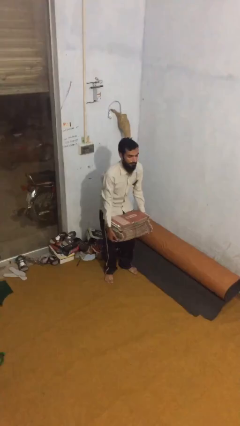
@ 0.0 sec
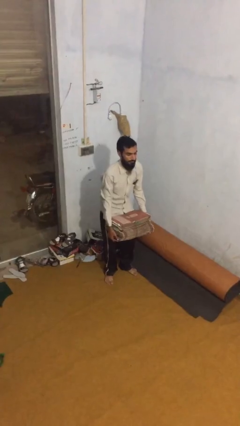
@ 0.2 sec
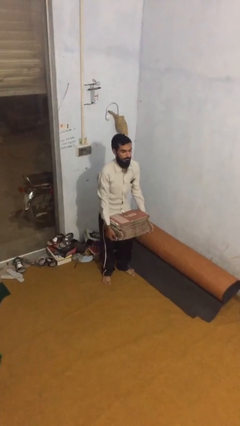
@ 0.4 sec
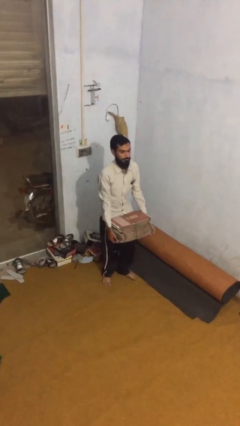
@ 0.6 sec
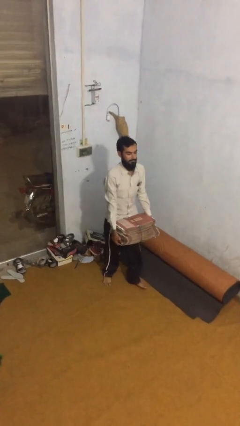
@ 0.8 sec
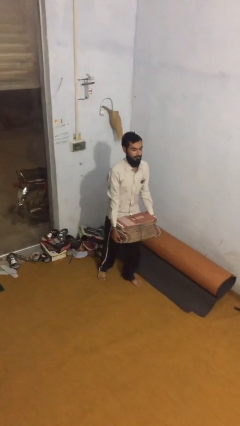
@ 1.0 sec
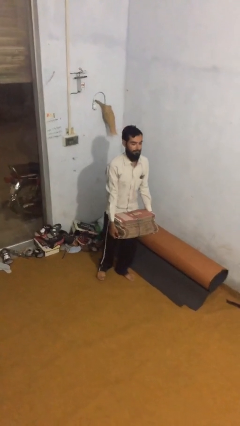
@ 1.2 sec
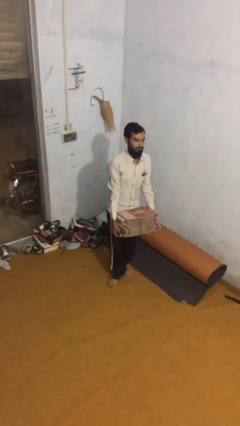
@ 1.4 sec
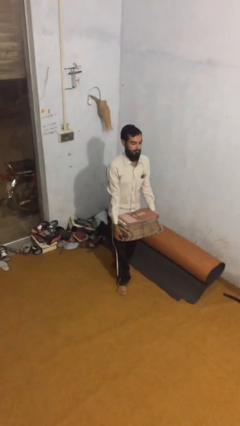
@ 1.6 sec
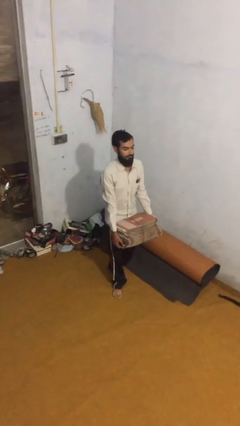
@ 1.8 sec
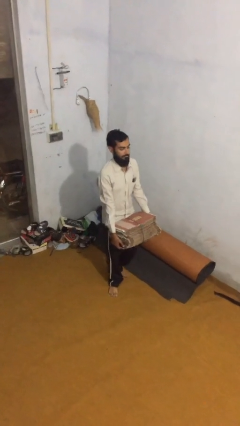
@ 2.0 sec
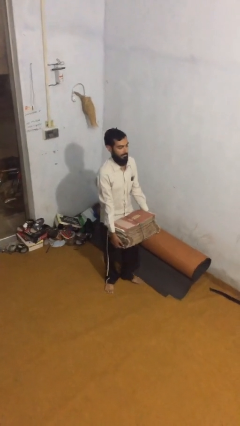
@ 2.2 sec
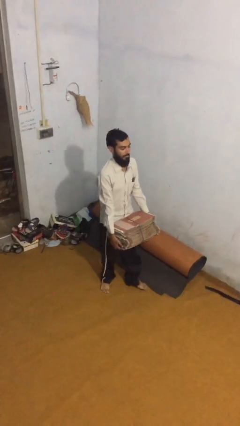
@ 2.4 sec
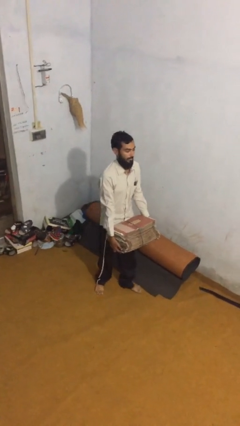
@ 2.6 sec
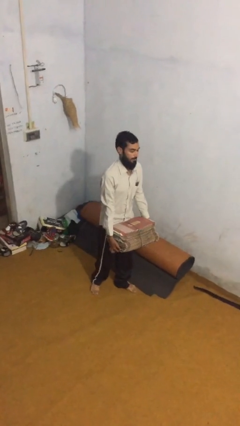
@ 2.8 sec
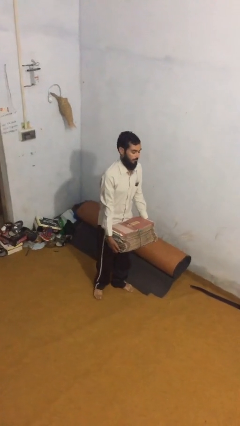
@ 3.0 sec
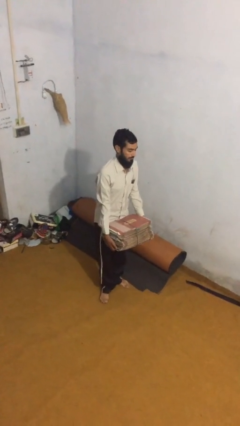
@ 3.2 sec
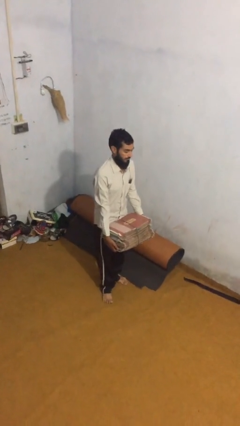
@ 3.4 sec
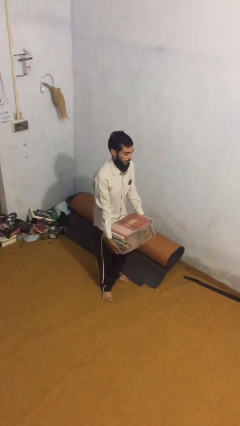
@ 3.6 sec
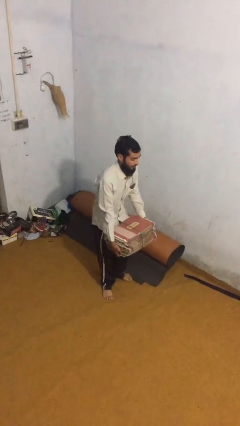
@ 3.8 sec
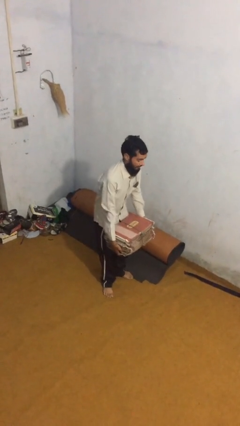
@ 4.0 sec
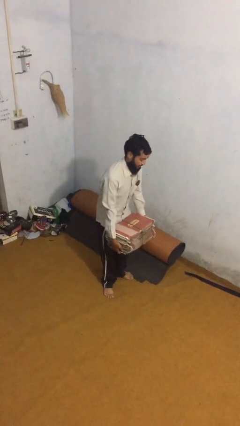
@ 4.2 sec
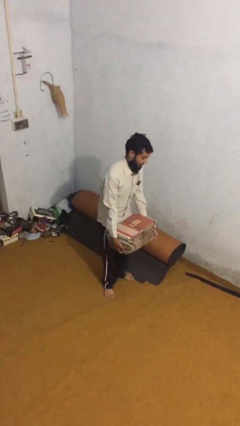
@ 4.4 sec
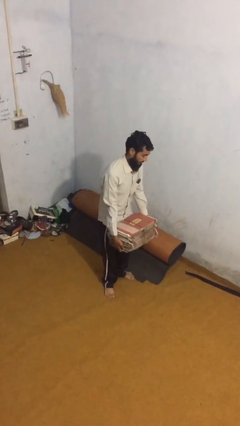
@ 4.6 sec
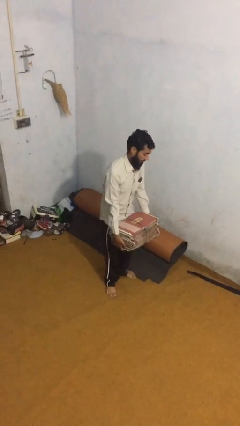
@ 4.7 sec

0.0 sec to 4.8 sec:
person carries heavy object

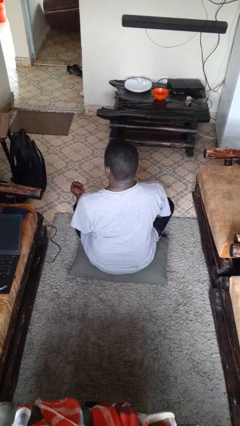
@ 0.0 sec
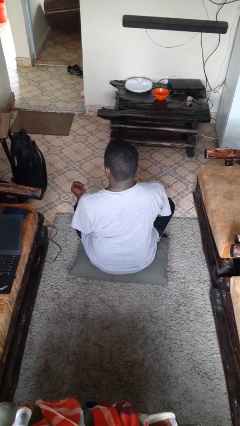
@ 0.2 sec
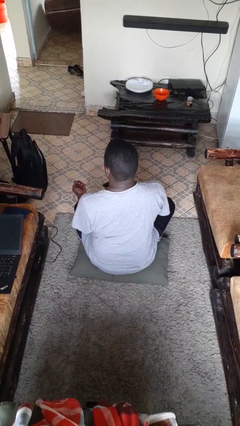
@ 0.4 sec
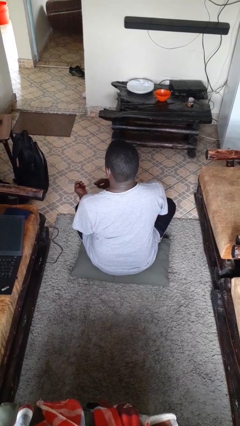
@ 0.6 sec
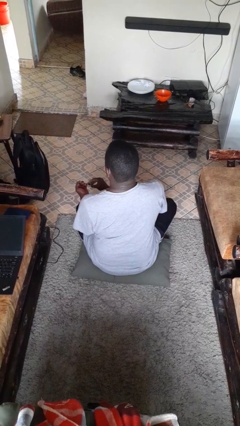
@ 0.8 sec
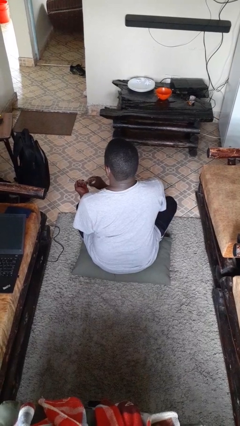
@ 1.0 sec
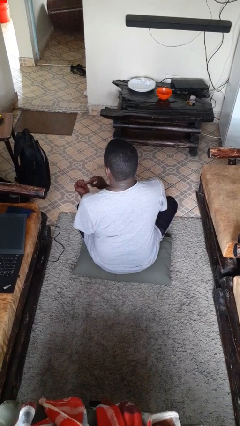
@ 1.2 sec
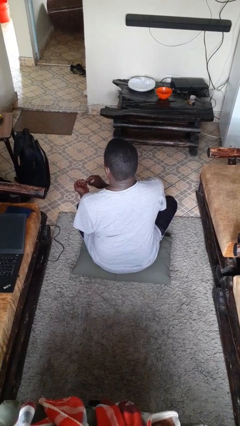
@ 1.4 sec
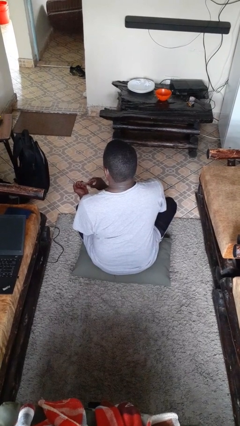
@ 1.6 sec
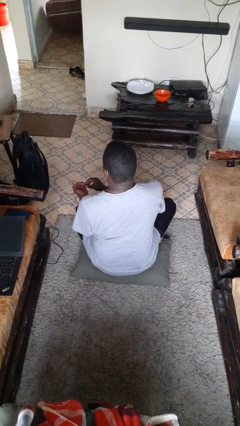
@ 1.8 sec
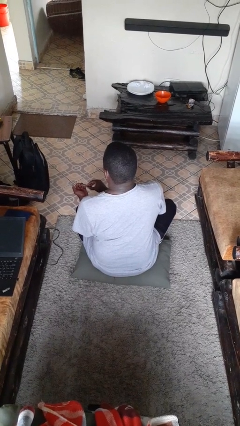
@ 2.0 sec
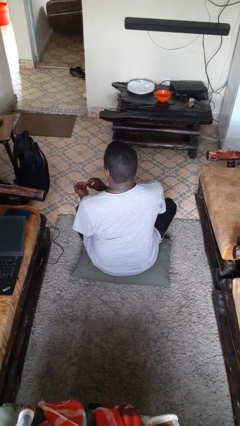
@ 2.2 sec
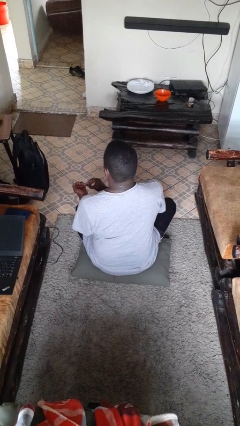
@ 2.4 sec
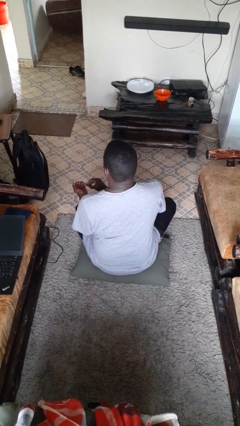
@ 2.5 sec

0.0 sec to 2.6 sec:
person files fingernails

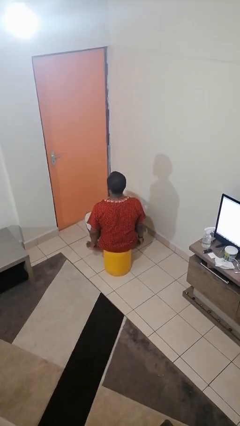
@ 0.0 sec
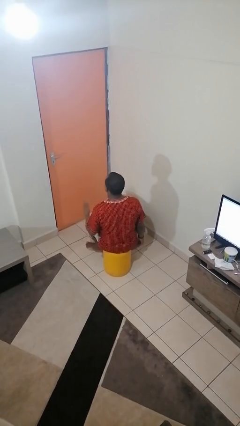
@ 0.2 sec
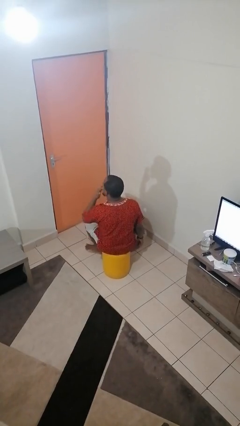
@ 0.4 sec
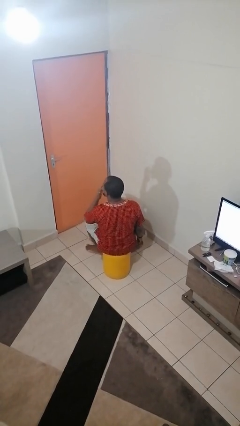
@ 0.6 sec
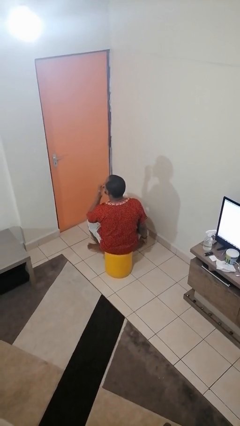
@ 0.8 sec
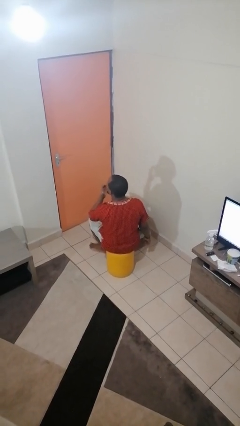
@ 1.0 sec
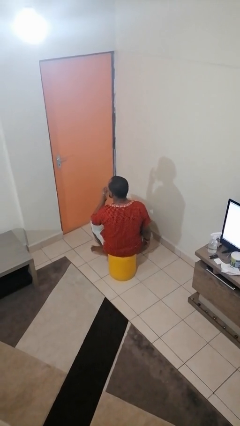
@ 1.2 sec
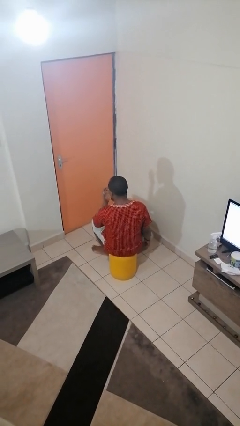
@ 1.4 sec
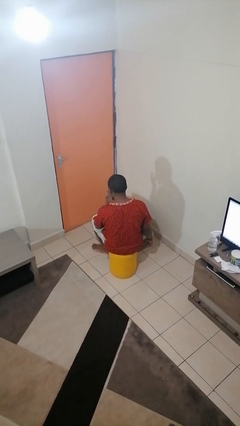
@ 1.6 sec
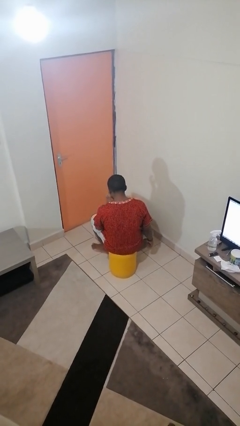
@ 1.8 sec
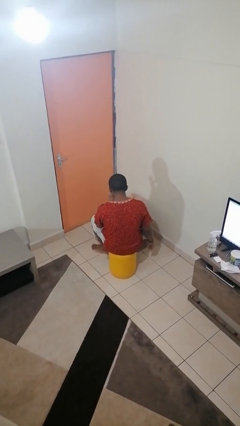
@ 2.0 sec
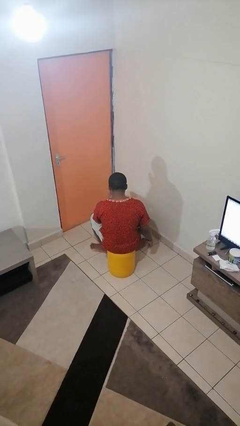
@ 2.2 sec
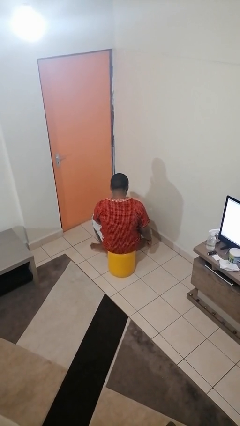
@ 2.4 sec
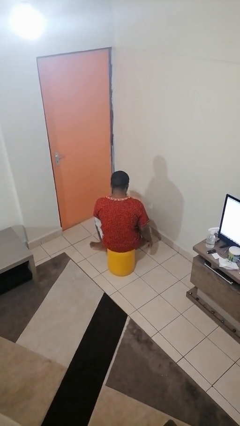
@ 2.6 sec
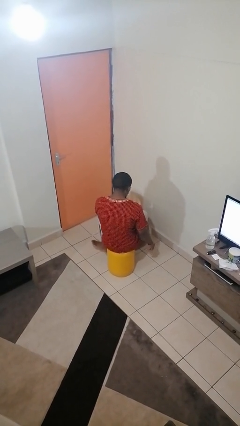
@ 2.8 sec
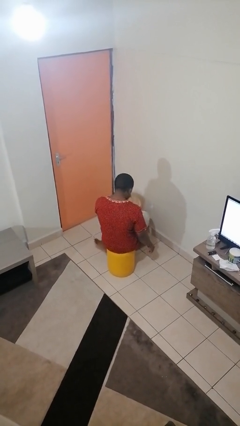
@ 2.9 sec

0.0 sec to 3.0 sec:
person licks fingers

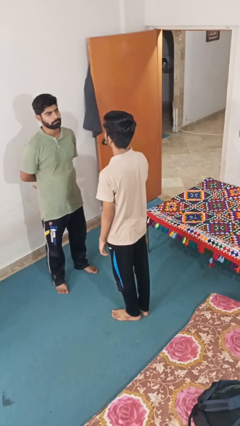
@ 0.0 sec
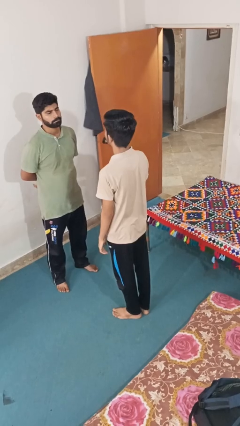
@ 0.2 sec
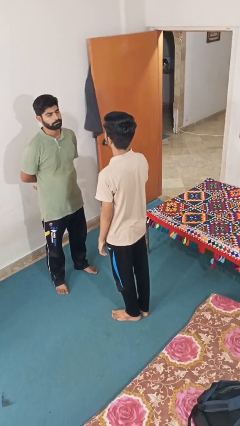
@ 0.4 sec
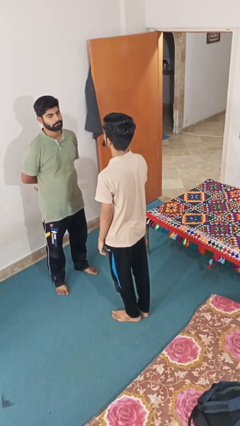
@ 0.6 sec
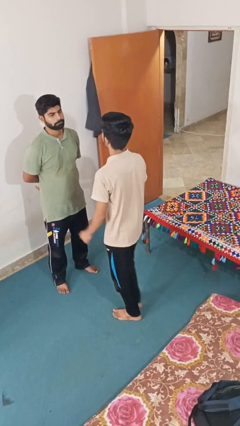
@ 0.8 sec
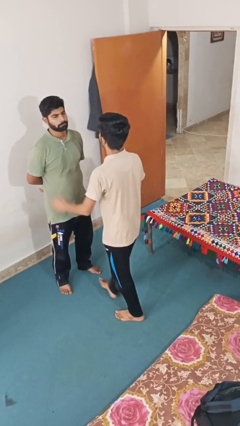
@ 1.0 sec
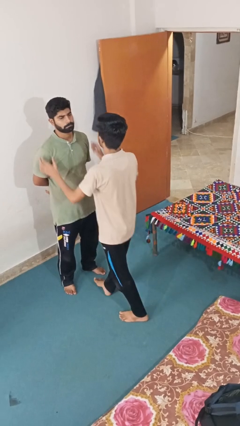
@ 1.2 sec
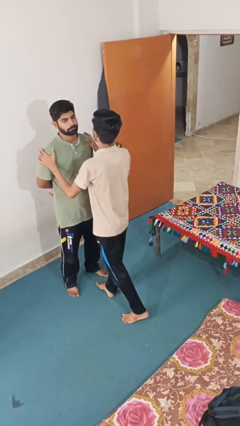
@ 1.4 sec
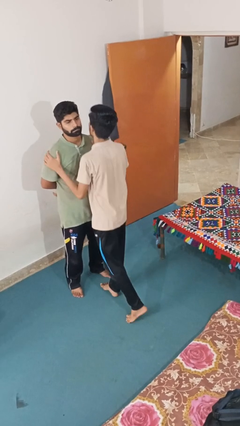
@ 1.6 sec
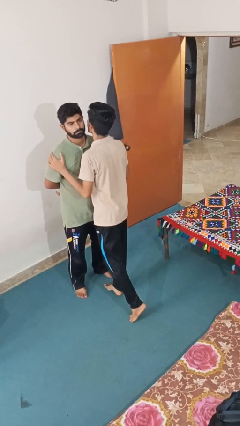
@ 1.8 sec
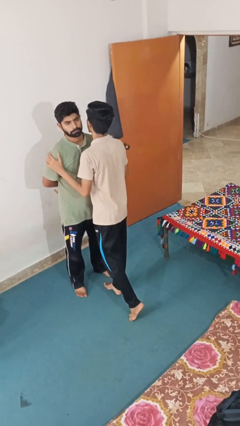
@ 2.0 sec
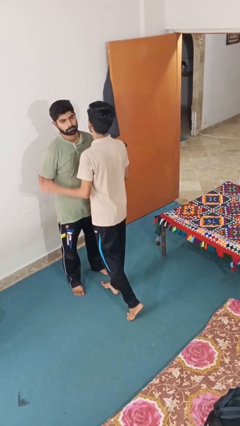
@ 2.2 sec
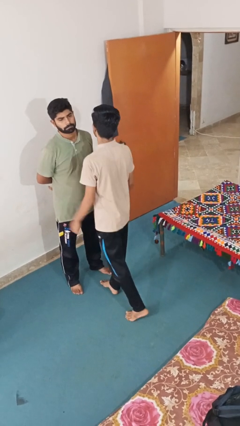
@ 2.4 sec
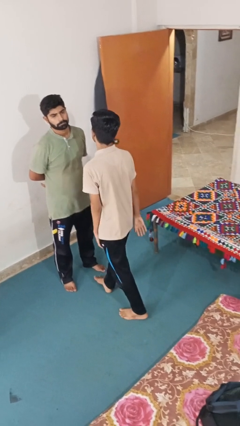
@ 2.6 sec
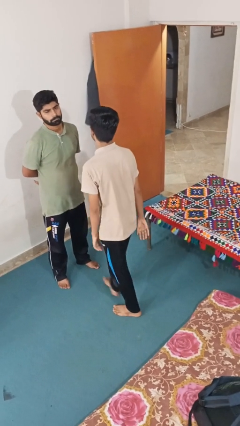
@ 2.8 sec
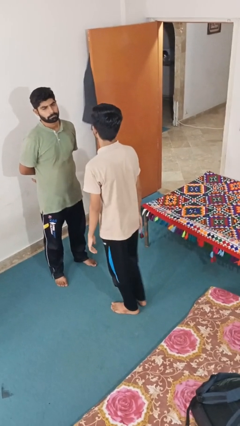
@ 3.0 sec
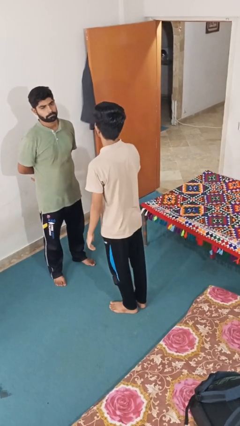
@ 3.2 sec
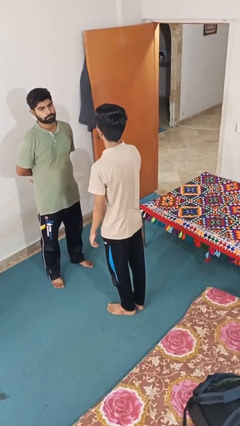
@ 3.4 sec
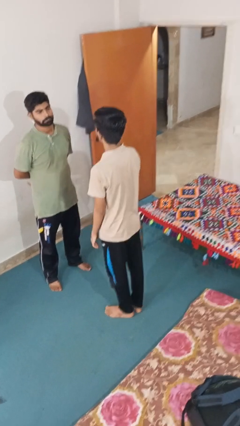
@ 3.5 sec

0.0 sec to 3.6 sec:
person kisses cheek of person

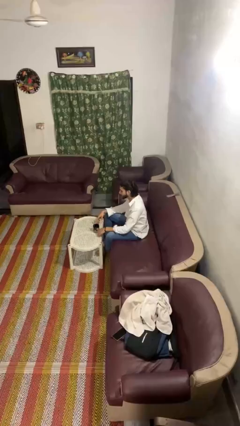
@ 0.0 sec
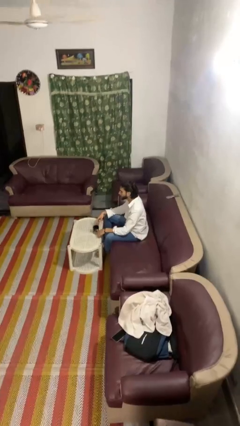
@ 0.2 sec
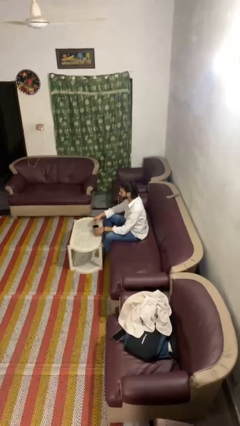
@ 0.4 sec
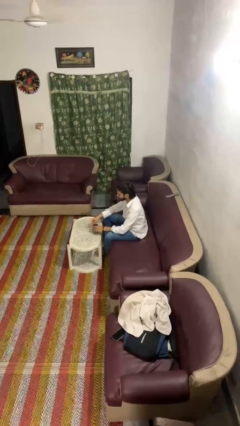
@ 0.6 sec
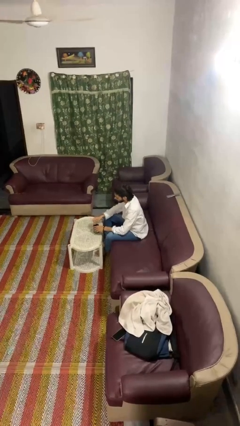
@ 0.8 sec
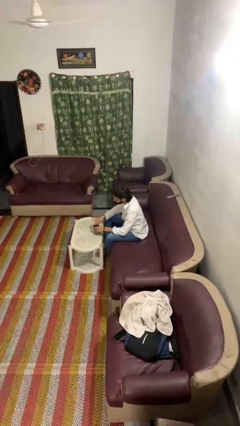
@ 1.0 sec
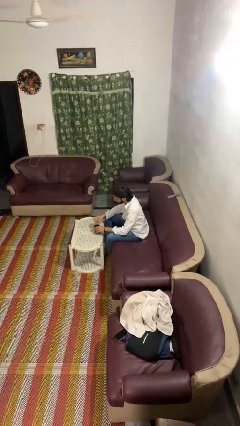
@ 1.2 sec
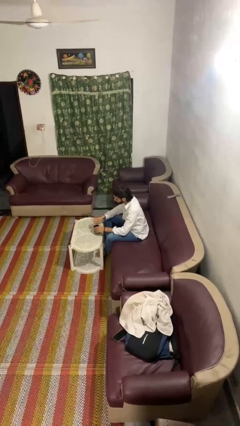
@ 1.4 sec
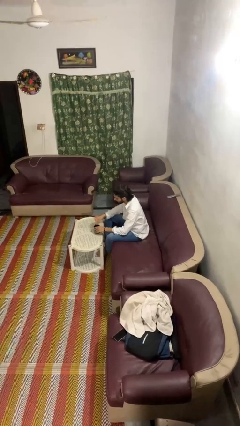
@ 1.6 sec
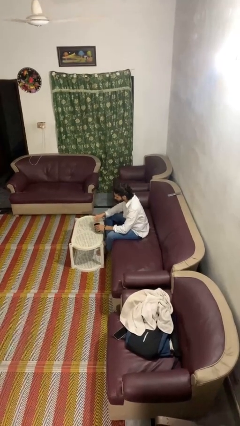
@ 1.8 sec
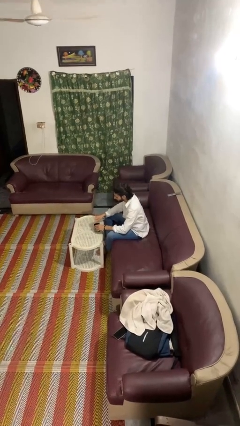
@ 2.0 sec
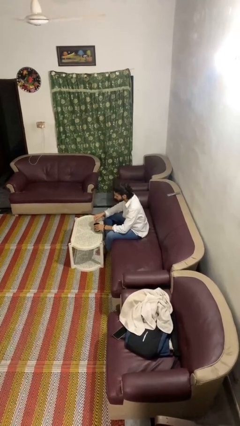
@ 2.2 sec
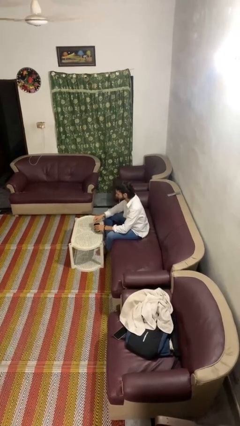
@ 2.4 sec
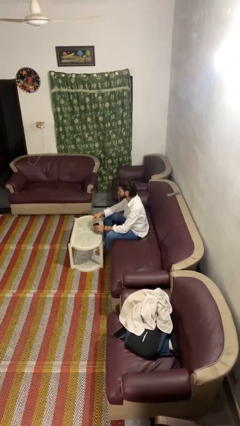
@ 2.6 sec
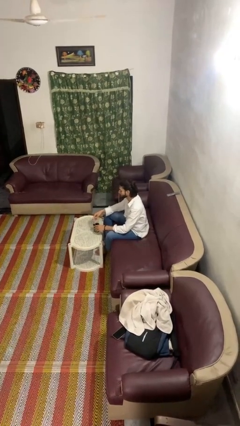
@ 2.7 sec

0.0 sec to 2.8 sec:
person stirs mug

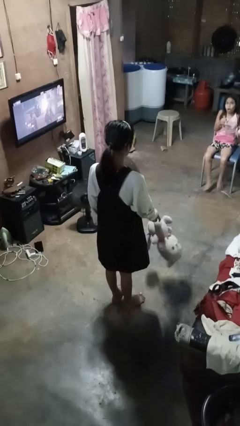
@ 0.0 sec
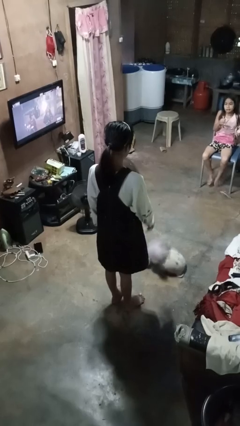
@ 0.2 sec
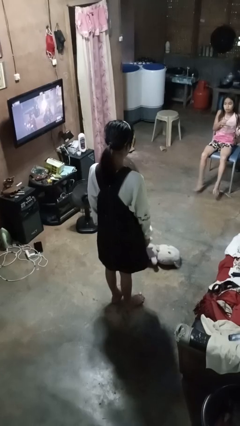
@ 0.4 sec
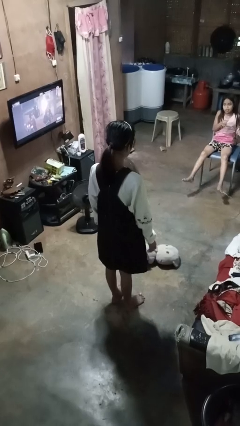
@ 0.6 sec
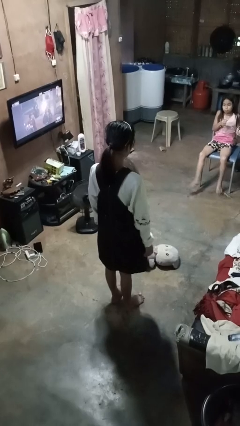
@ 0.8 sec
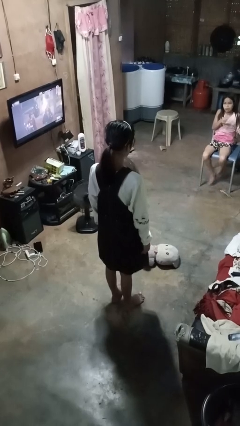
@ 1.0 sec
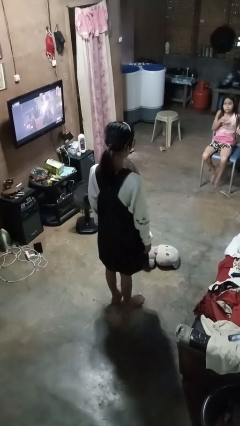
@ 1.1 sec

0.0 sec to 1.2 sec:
person throws object to ground
